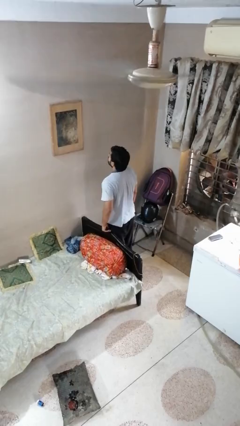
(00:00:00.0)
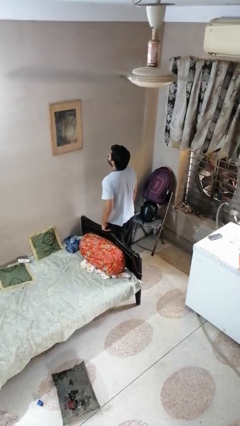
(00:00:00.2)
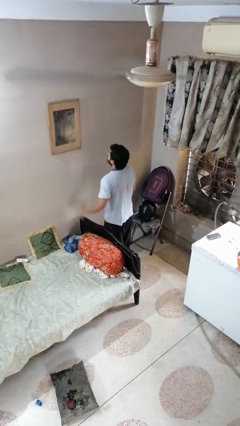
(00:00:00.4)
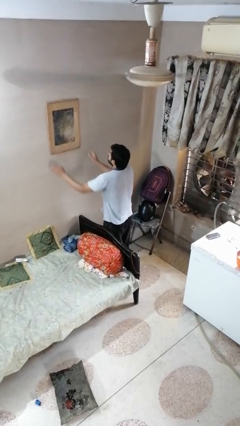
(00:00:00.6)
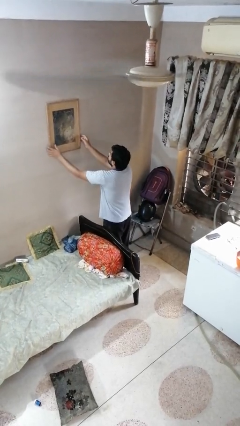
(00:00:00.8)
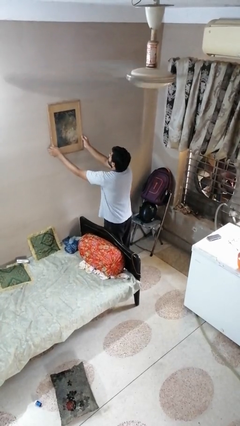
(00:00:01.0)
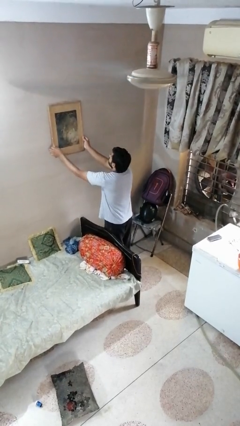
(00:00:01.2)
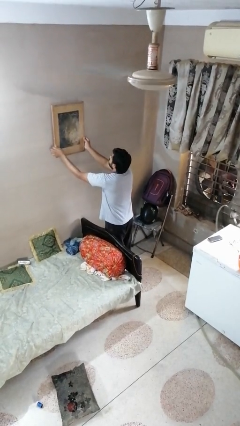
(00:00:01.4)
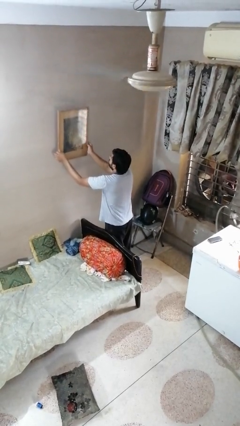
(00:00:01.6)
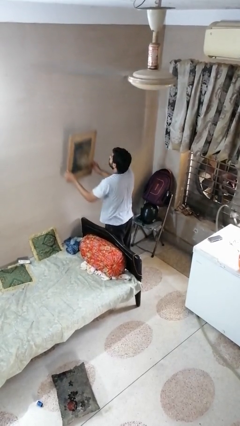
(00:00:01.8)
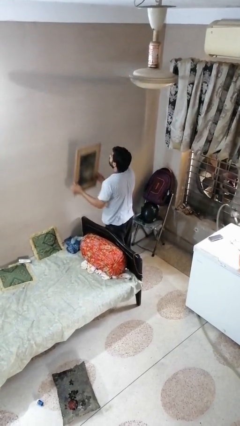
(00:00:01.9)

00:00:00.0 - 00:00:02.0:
person takes down picture frame

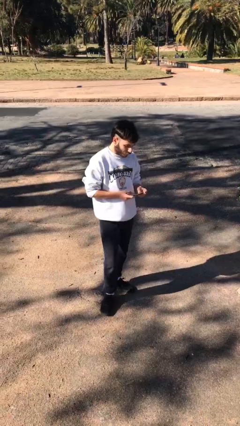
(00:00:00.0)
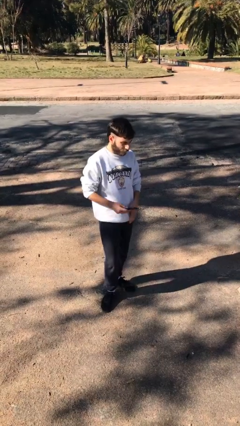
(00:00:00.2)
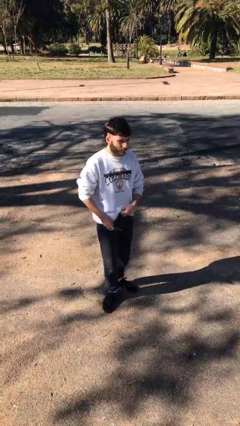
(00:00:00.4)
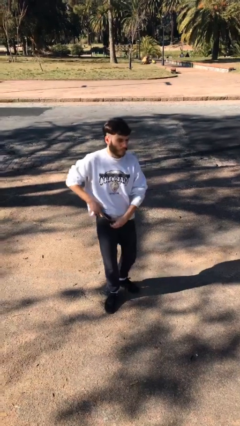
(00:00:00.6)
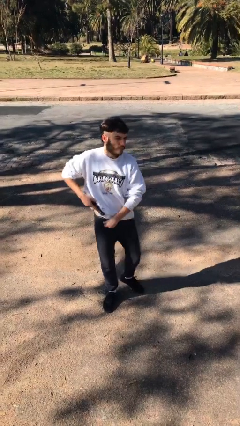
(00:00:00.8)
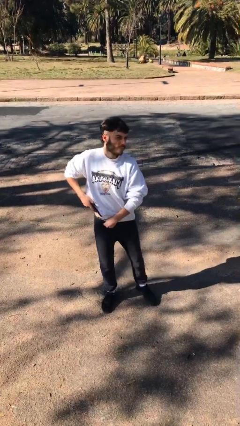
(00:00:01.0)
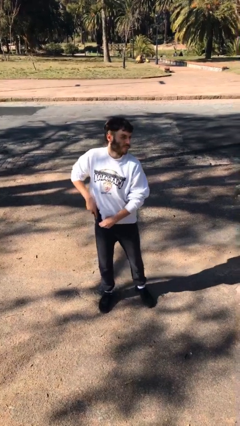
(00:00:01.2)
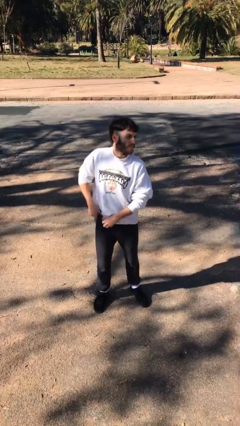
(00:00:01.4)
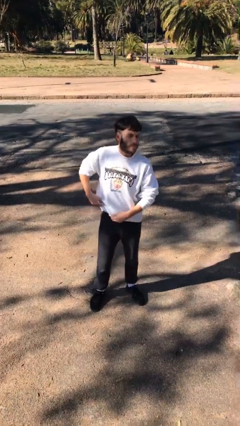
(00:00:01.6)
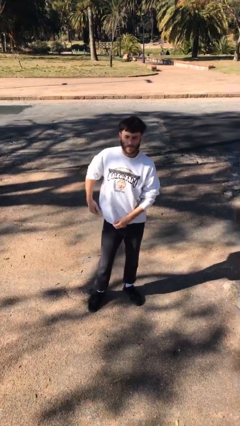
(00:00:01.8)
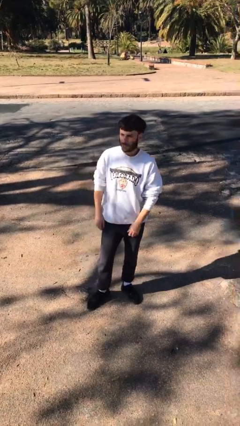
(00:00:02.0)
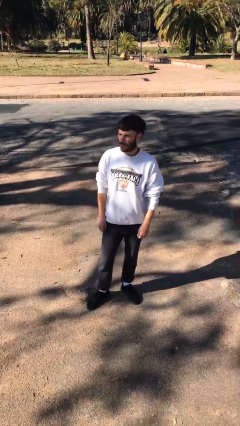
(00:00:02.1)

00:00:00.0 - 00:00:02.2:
person puts phone into pocket

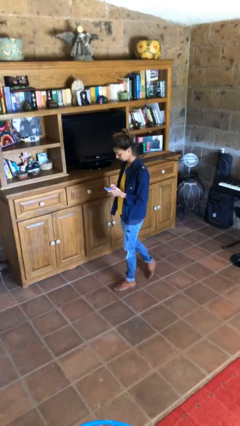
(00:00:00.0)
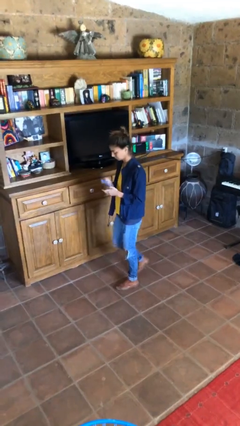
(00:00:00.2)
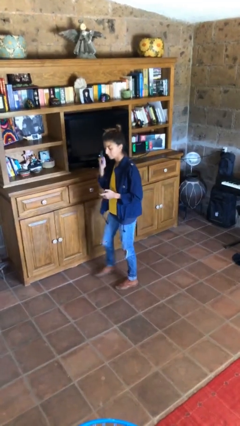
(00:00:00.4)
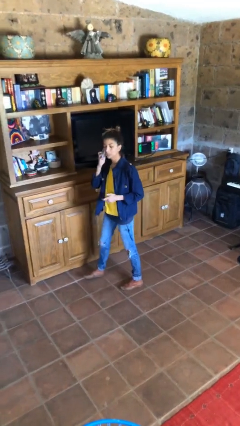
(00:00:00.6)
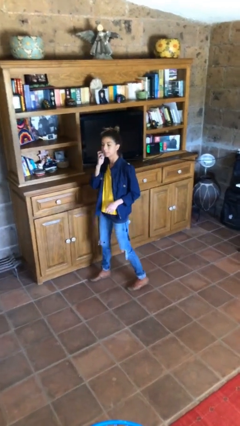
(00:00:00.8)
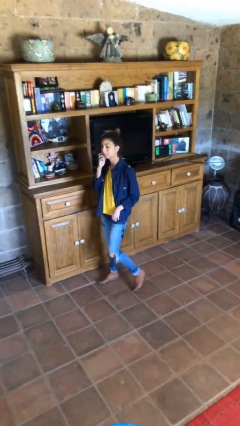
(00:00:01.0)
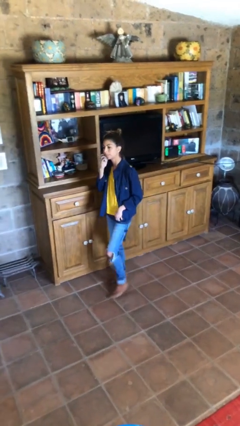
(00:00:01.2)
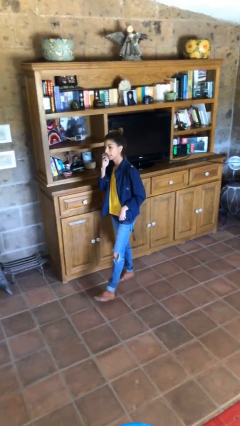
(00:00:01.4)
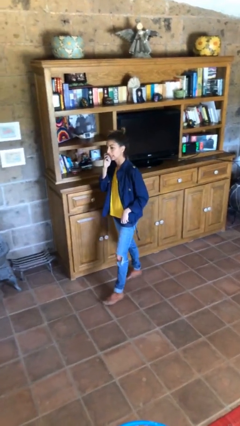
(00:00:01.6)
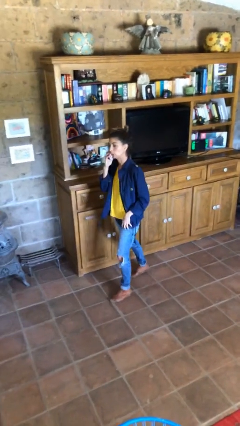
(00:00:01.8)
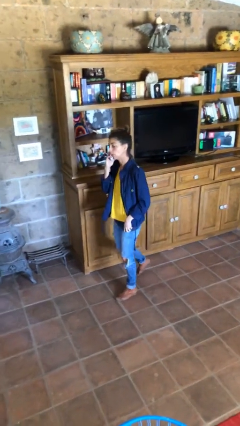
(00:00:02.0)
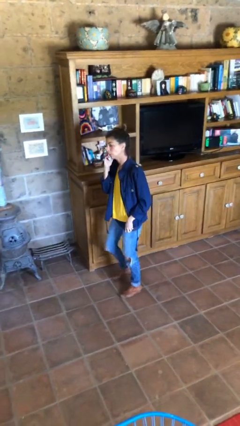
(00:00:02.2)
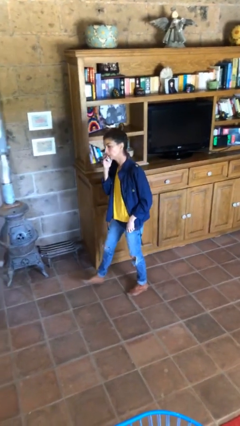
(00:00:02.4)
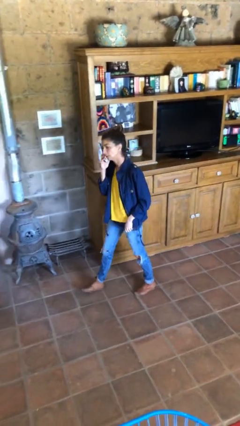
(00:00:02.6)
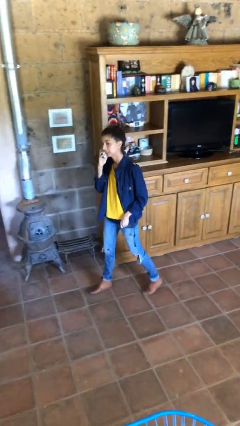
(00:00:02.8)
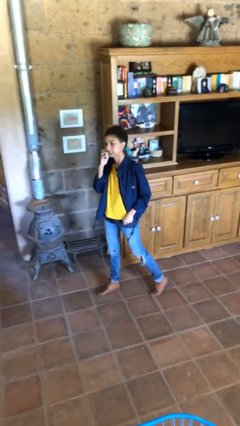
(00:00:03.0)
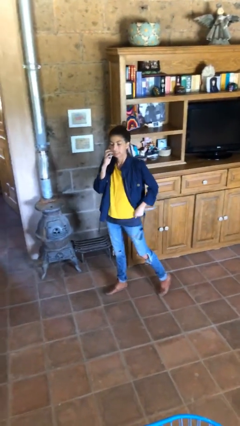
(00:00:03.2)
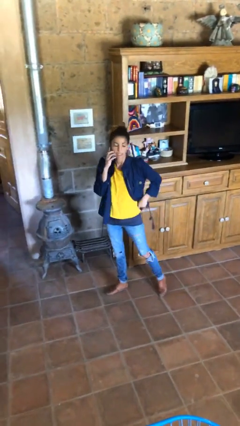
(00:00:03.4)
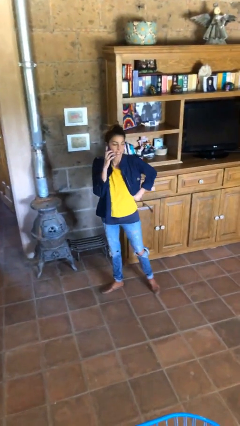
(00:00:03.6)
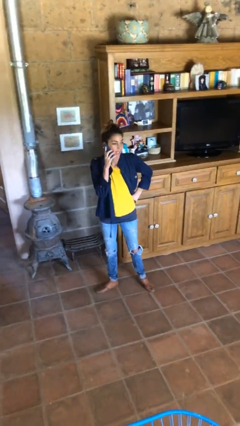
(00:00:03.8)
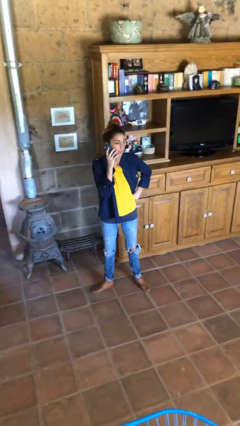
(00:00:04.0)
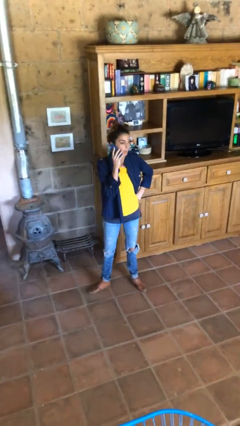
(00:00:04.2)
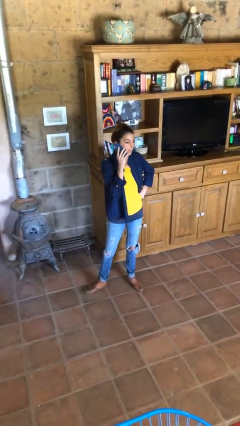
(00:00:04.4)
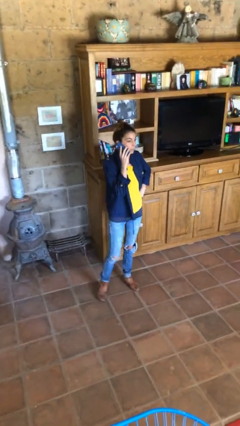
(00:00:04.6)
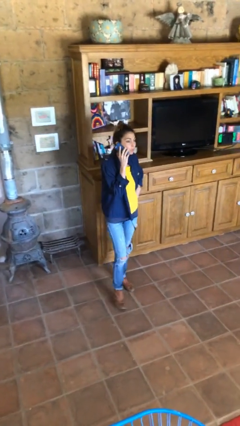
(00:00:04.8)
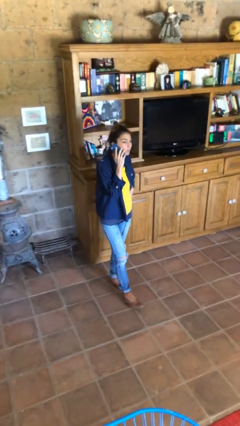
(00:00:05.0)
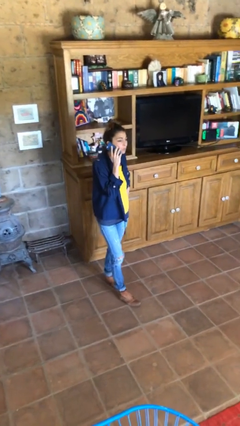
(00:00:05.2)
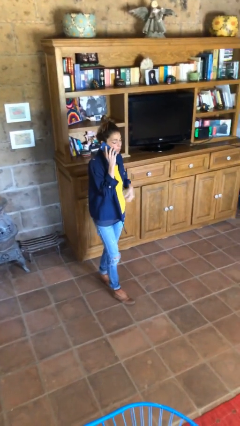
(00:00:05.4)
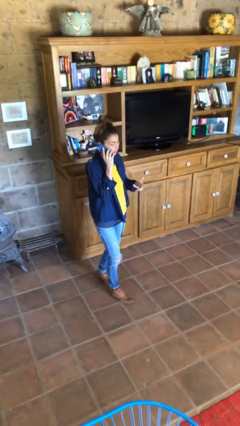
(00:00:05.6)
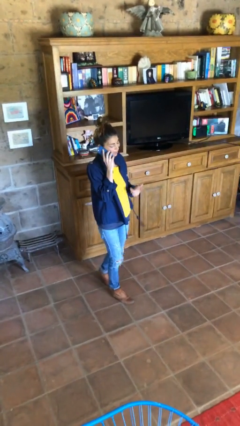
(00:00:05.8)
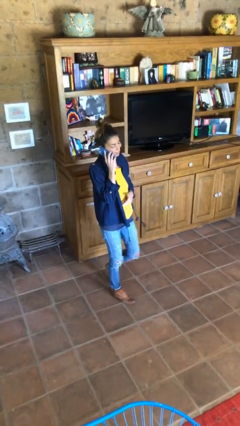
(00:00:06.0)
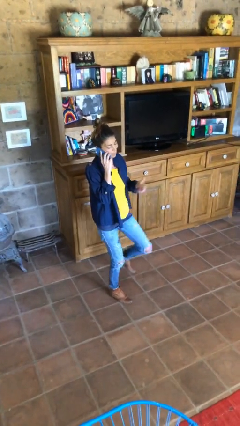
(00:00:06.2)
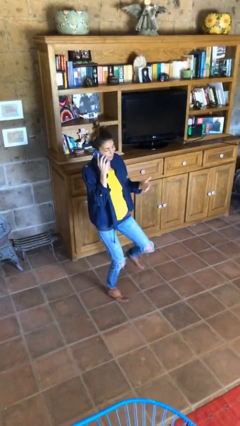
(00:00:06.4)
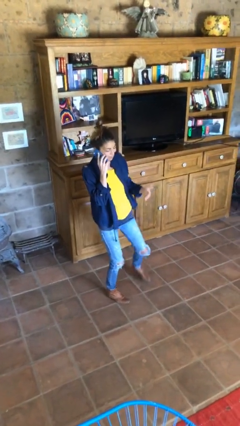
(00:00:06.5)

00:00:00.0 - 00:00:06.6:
person talks on phone

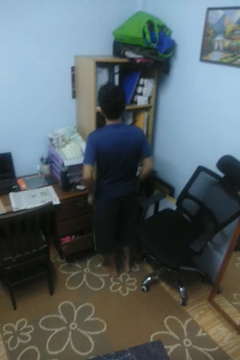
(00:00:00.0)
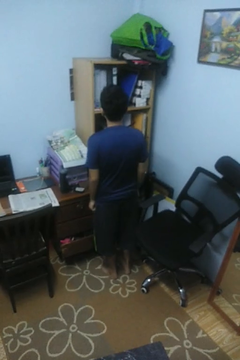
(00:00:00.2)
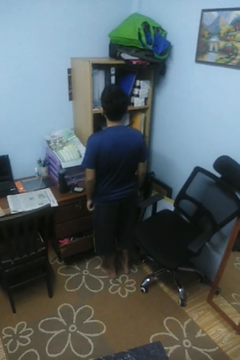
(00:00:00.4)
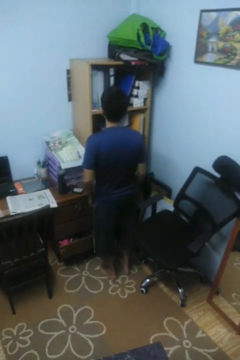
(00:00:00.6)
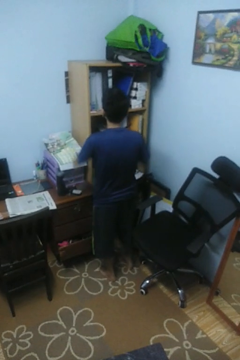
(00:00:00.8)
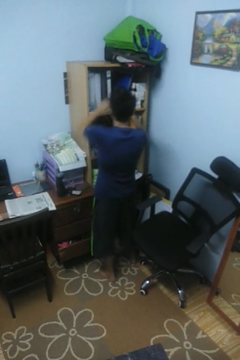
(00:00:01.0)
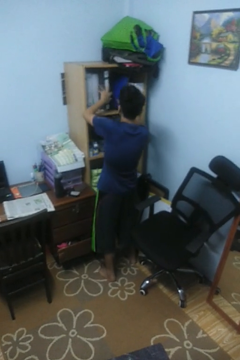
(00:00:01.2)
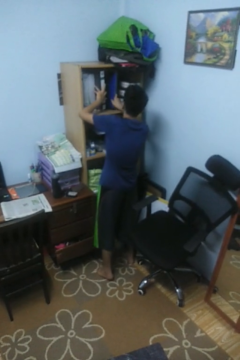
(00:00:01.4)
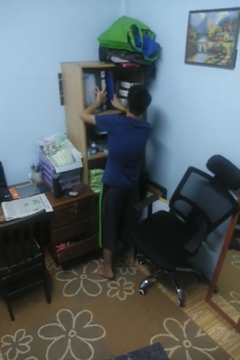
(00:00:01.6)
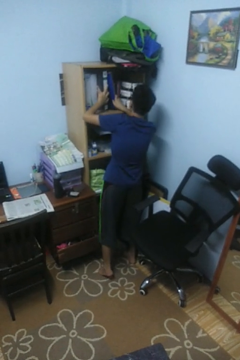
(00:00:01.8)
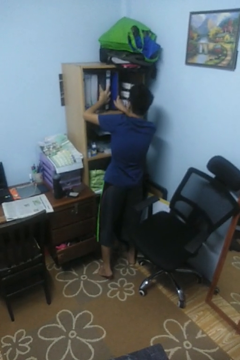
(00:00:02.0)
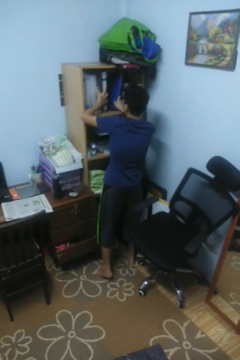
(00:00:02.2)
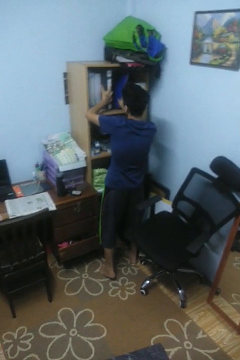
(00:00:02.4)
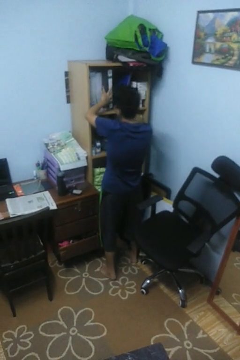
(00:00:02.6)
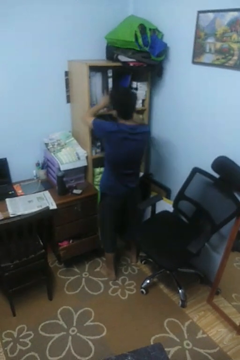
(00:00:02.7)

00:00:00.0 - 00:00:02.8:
person searches in cabinet

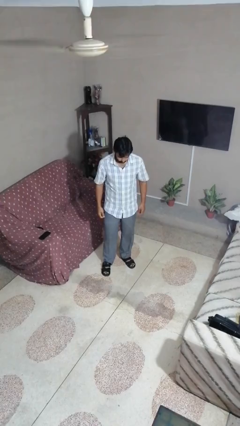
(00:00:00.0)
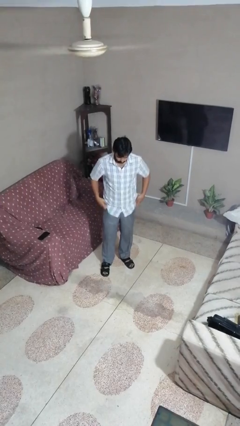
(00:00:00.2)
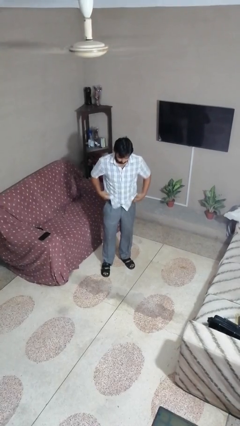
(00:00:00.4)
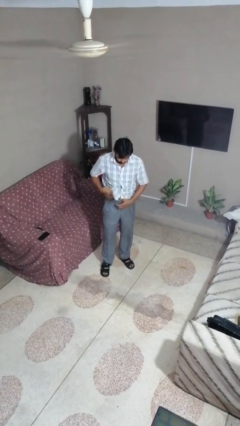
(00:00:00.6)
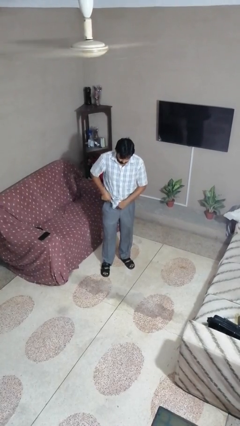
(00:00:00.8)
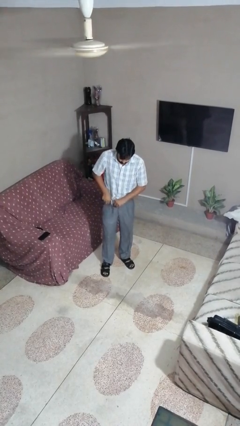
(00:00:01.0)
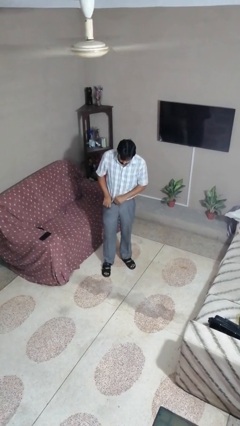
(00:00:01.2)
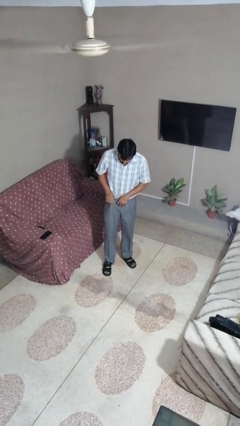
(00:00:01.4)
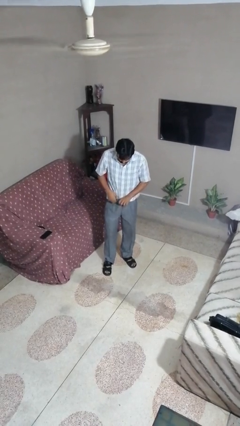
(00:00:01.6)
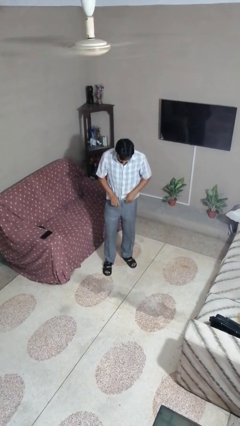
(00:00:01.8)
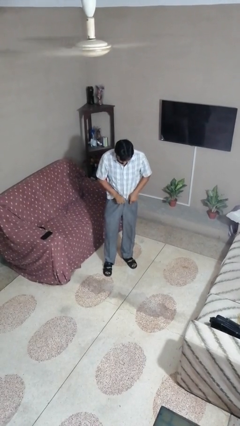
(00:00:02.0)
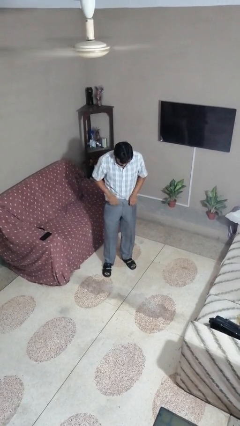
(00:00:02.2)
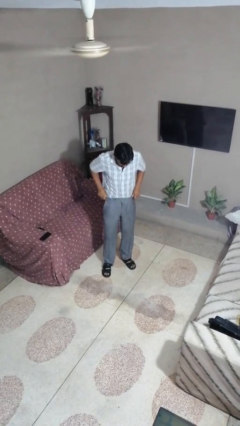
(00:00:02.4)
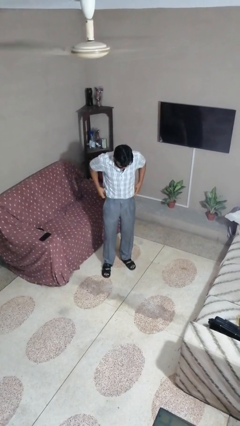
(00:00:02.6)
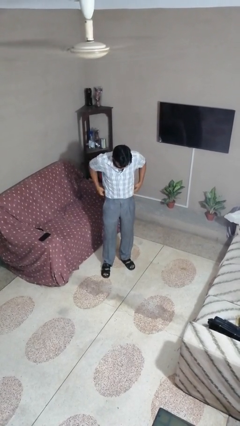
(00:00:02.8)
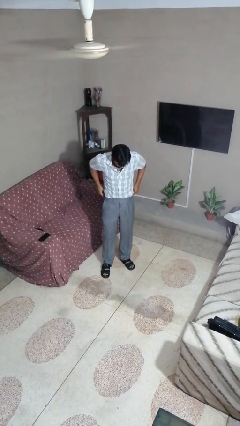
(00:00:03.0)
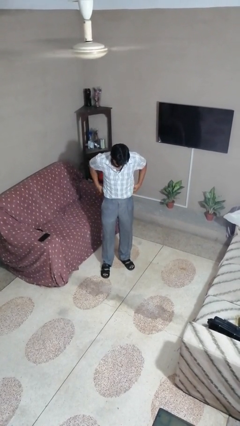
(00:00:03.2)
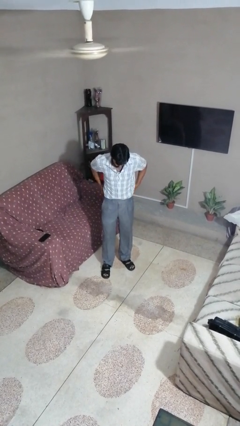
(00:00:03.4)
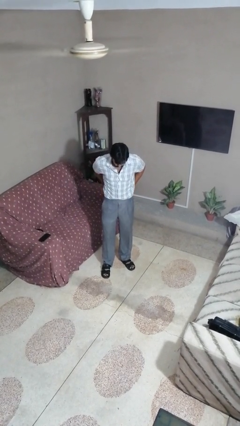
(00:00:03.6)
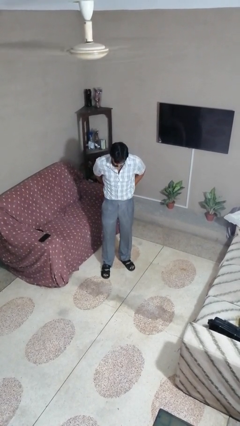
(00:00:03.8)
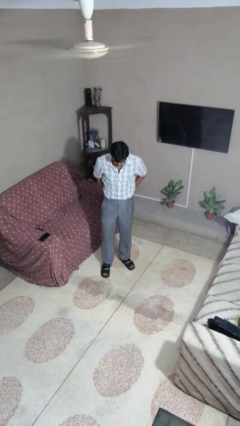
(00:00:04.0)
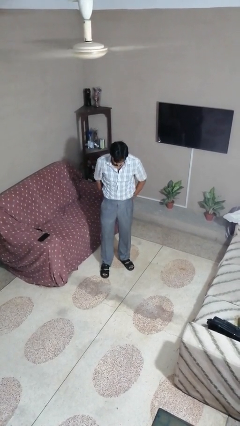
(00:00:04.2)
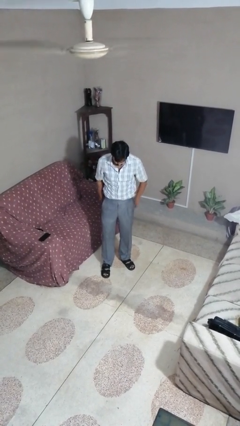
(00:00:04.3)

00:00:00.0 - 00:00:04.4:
person tucks in shirt
